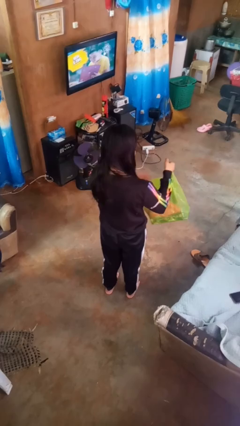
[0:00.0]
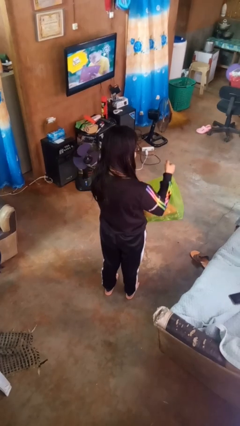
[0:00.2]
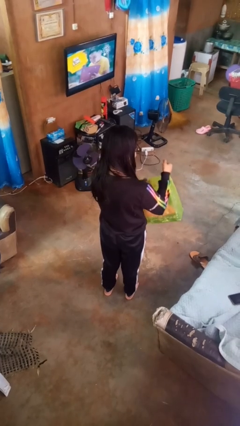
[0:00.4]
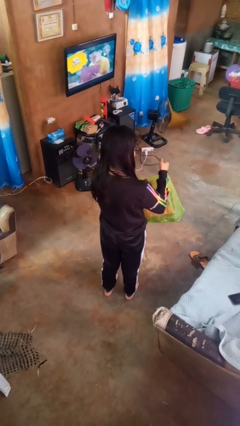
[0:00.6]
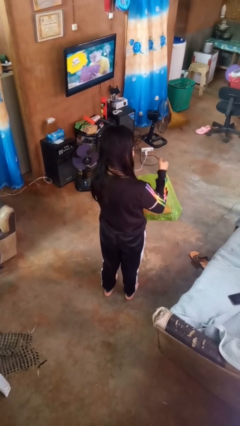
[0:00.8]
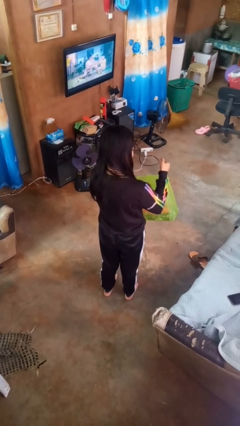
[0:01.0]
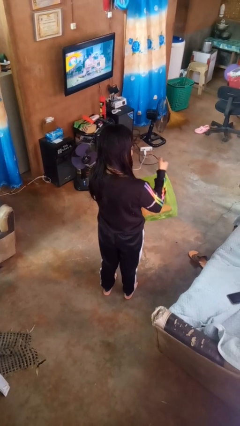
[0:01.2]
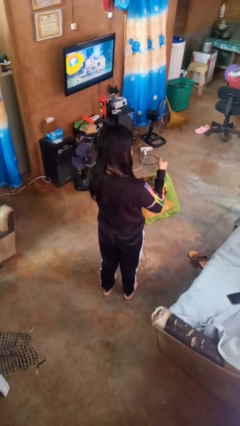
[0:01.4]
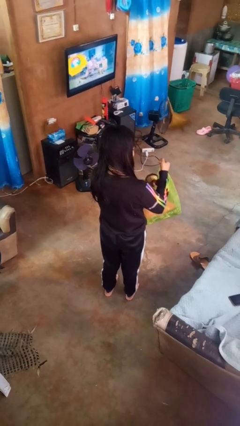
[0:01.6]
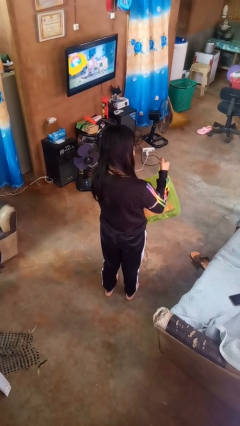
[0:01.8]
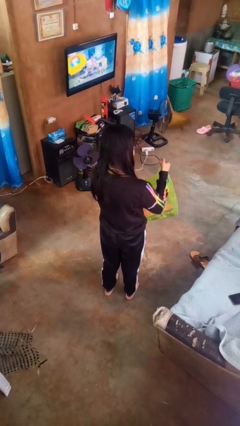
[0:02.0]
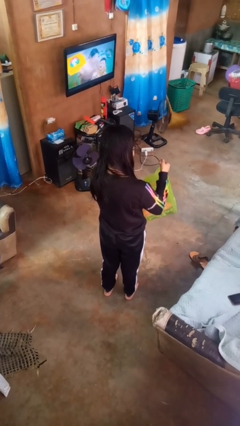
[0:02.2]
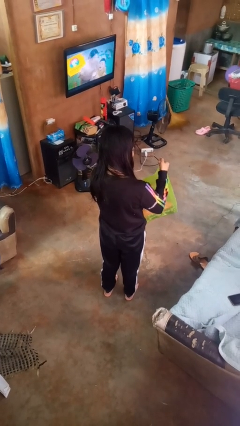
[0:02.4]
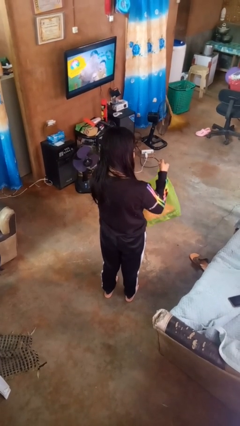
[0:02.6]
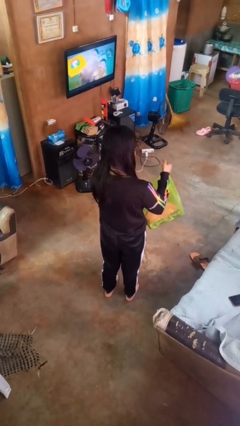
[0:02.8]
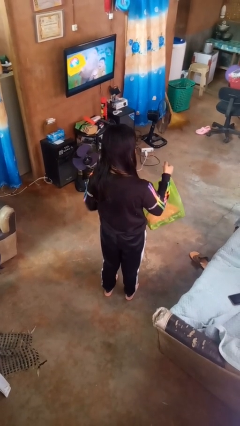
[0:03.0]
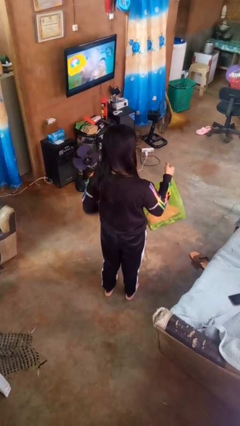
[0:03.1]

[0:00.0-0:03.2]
person searches in bag

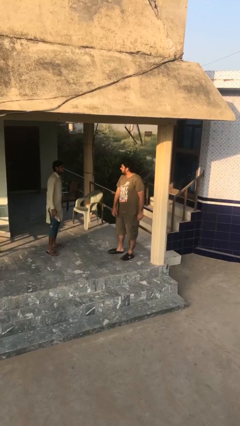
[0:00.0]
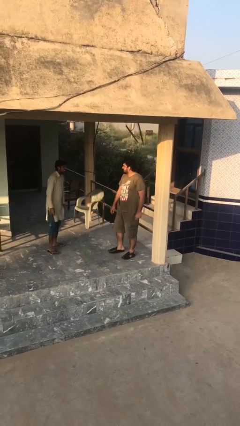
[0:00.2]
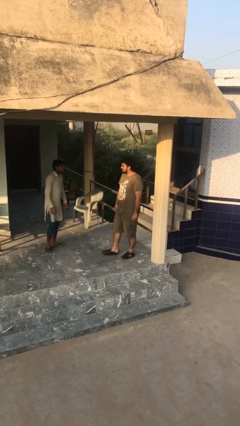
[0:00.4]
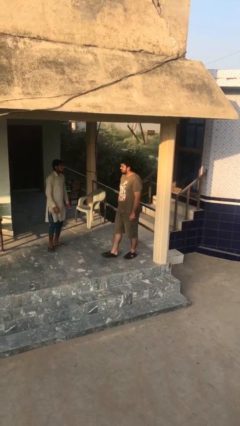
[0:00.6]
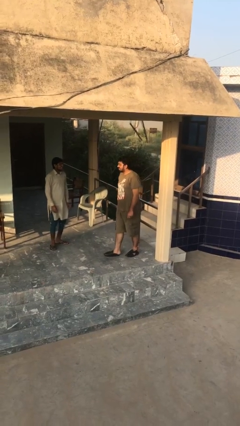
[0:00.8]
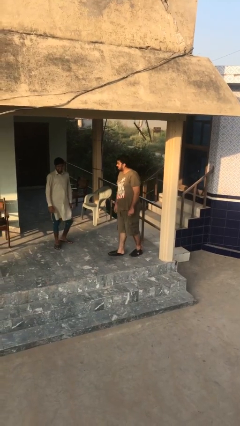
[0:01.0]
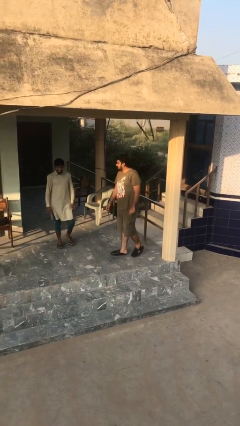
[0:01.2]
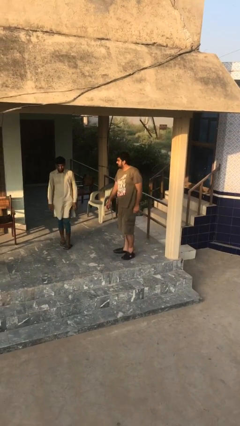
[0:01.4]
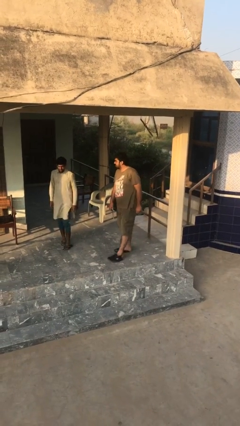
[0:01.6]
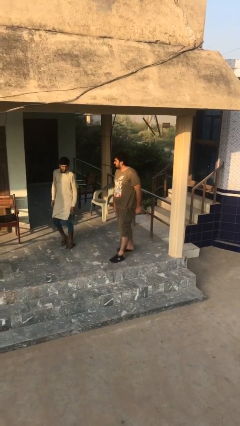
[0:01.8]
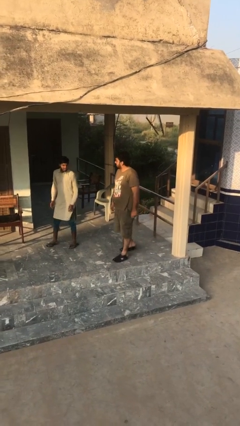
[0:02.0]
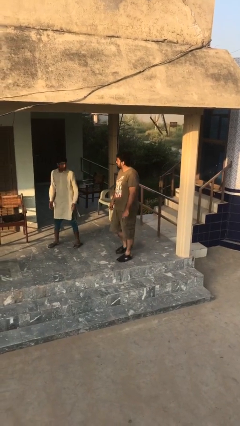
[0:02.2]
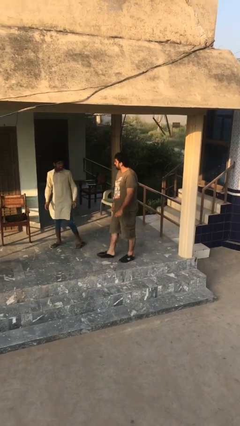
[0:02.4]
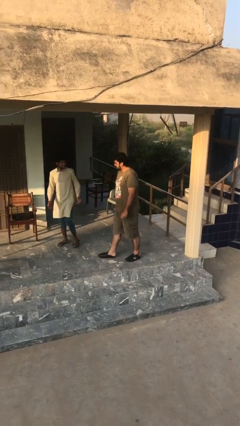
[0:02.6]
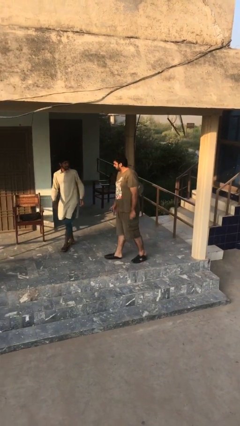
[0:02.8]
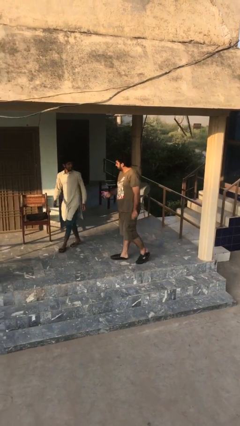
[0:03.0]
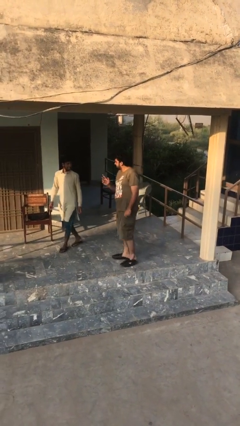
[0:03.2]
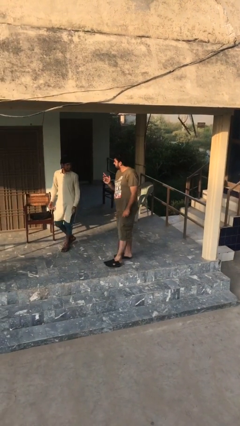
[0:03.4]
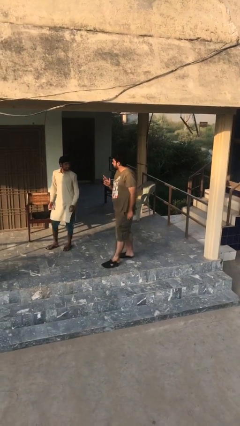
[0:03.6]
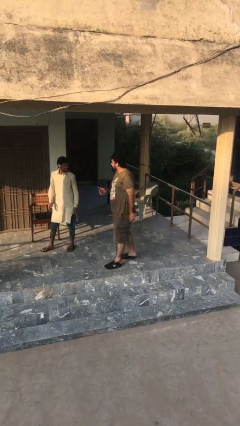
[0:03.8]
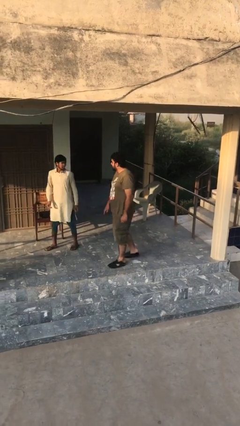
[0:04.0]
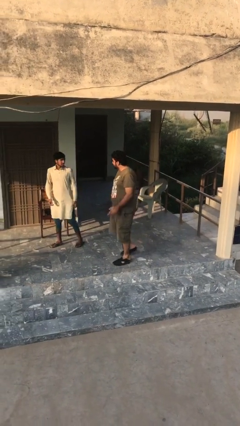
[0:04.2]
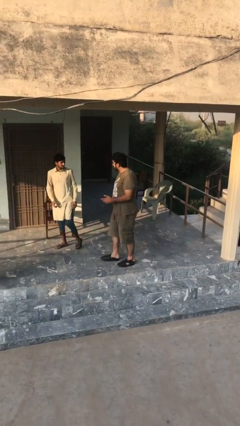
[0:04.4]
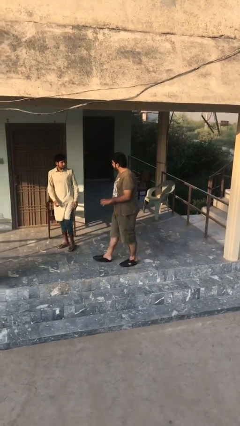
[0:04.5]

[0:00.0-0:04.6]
person talks to person

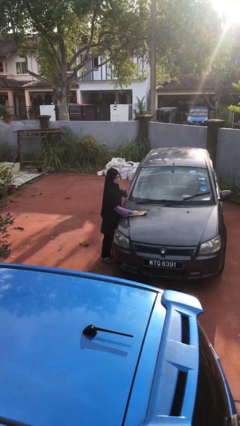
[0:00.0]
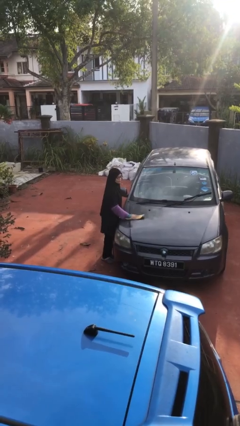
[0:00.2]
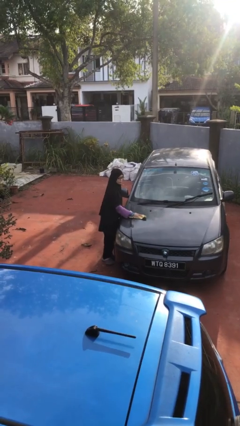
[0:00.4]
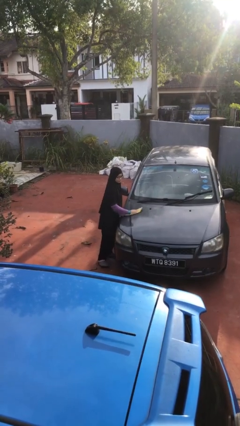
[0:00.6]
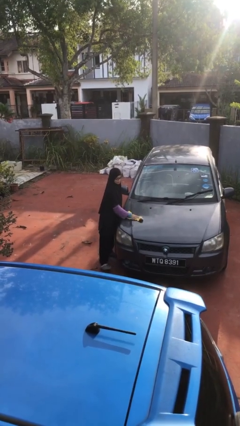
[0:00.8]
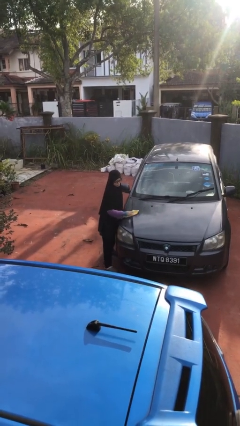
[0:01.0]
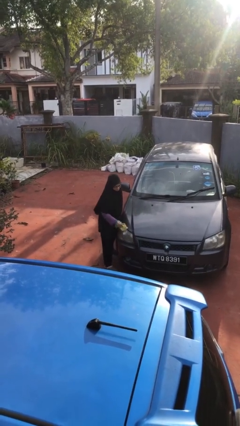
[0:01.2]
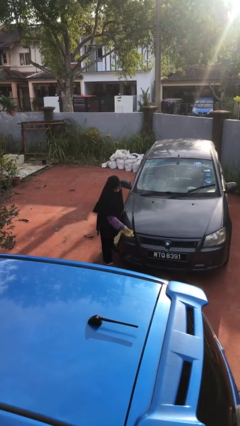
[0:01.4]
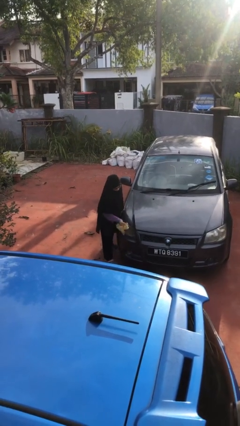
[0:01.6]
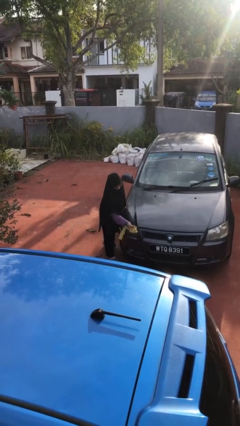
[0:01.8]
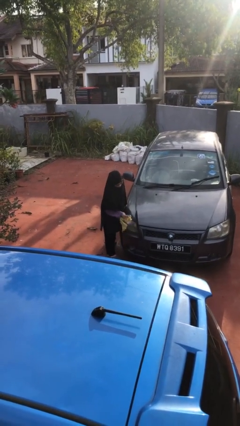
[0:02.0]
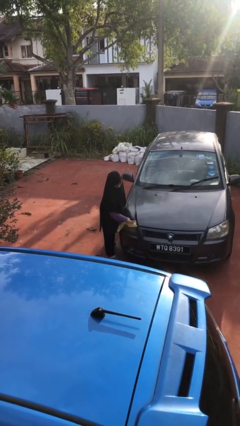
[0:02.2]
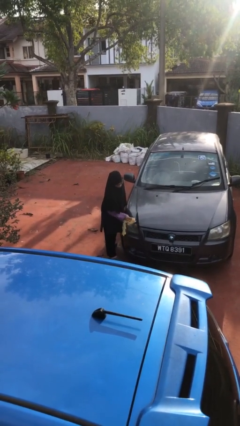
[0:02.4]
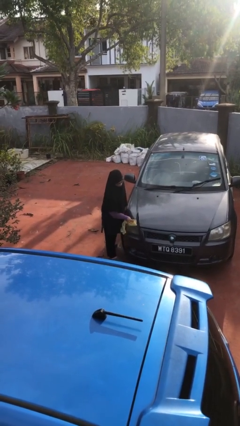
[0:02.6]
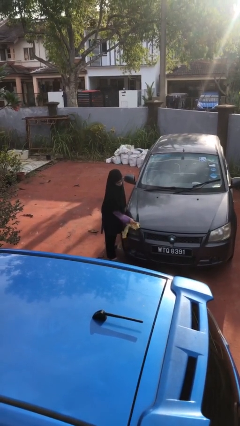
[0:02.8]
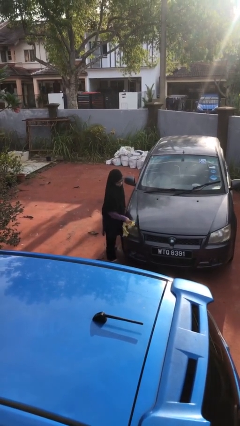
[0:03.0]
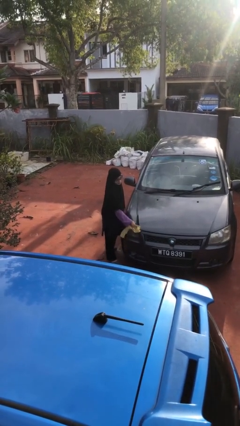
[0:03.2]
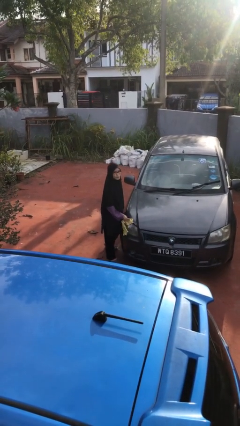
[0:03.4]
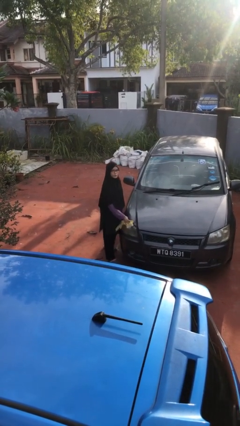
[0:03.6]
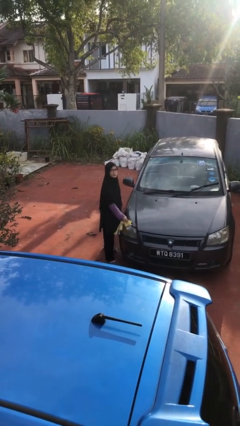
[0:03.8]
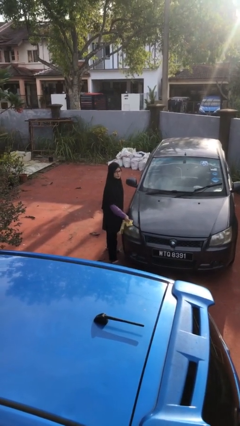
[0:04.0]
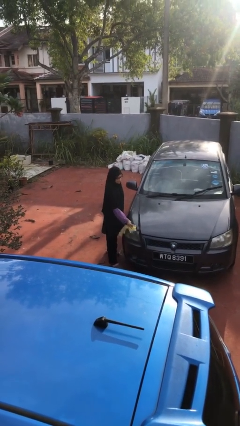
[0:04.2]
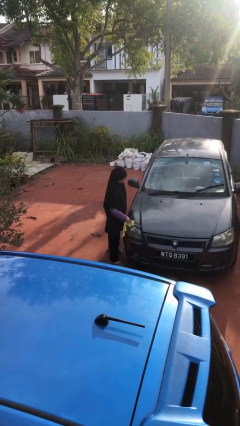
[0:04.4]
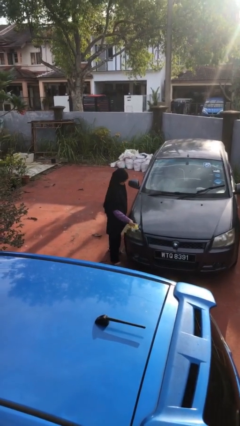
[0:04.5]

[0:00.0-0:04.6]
person polishes car with rag

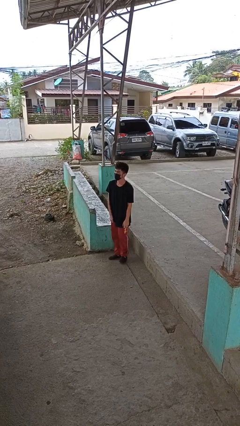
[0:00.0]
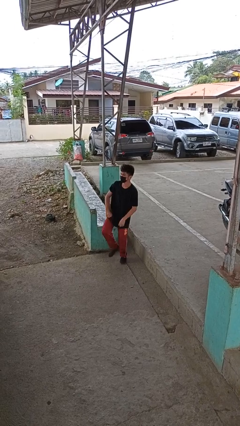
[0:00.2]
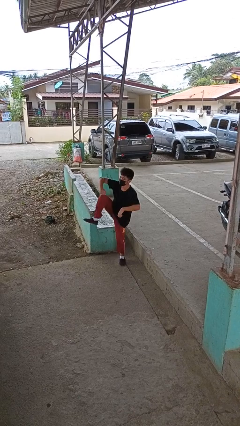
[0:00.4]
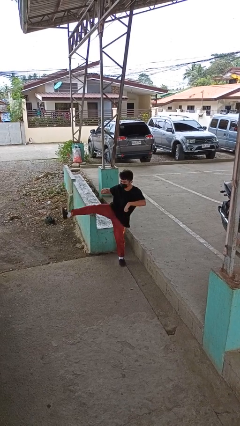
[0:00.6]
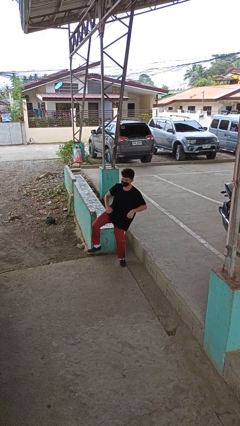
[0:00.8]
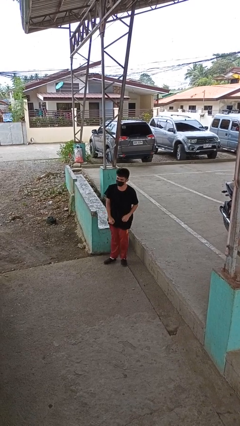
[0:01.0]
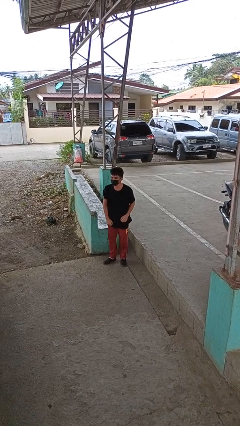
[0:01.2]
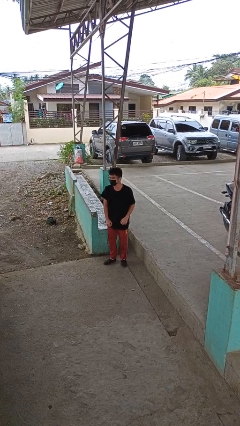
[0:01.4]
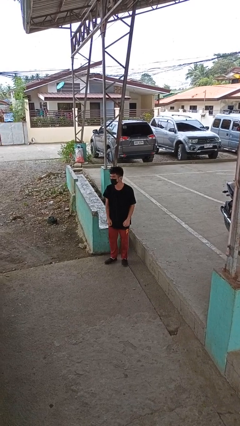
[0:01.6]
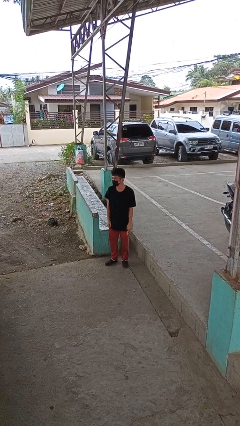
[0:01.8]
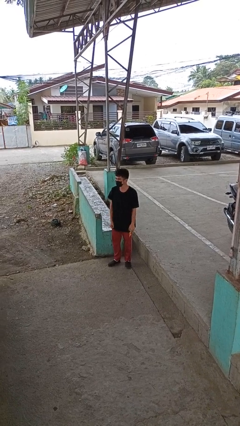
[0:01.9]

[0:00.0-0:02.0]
person karate kicks

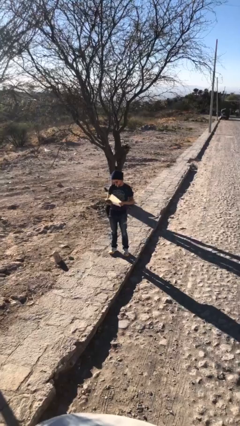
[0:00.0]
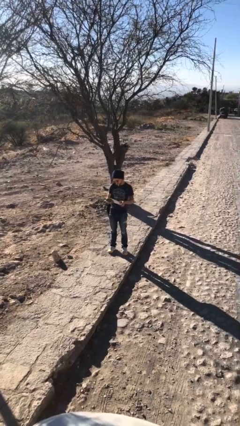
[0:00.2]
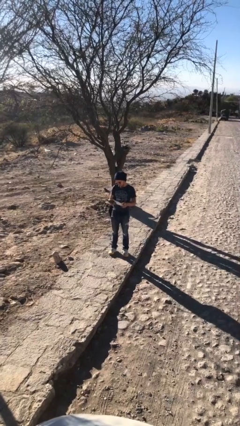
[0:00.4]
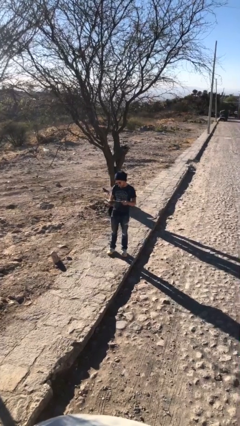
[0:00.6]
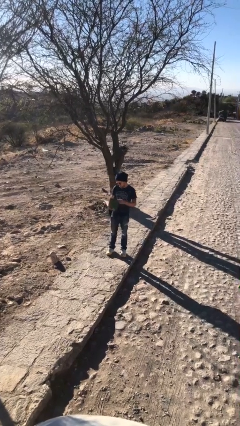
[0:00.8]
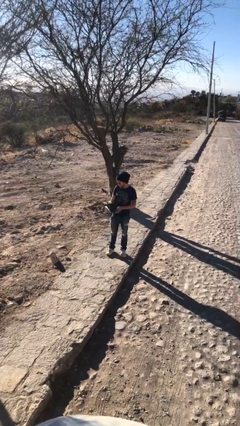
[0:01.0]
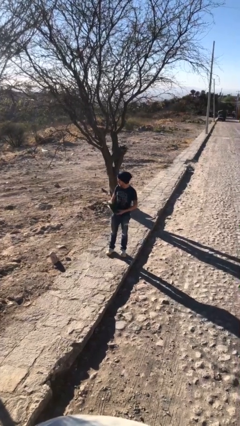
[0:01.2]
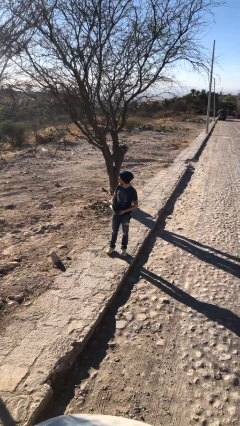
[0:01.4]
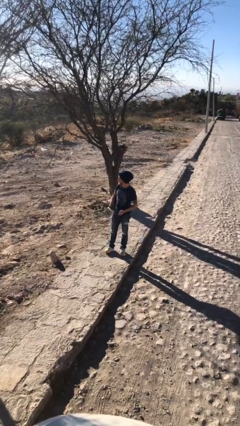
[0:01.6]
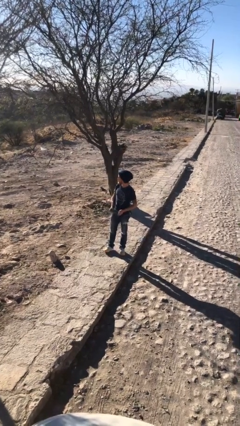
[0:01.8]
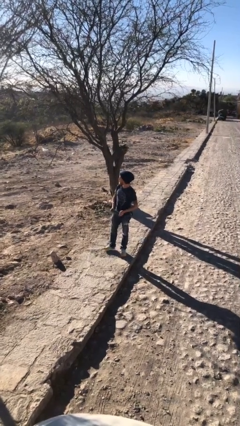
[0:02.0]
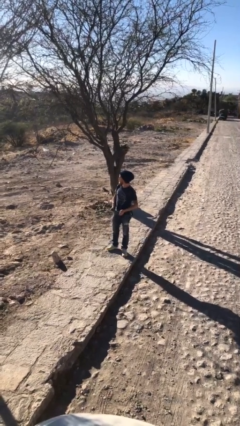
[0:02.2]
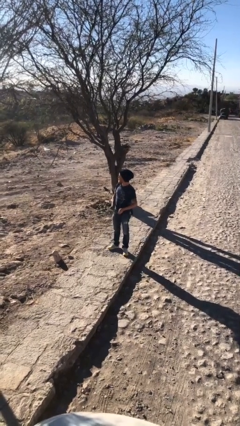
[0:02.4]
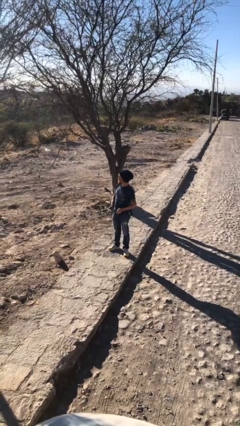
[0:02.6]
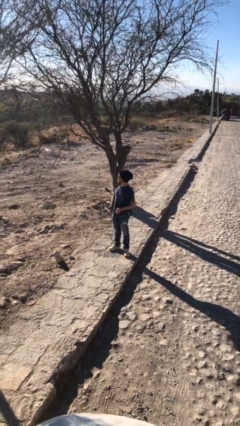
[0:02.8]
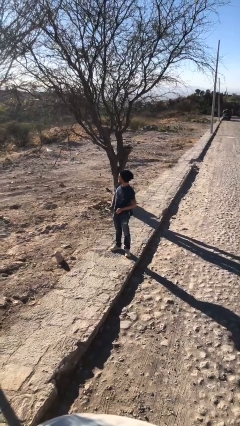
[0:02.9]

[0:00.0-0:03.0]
person reads document

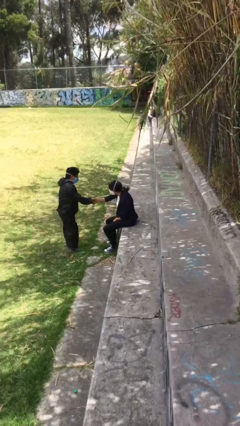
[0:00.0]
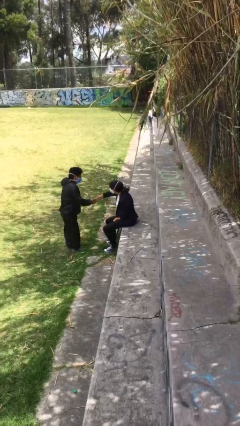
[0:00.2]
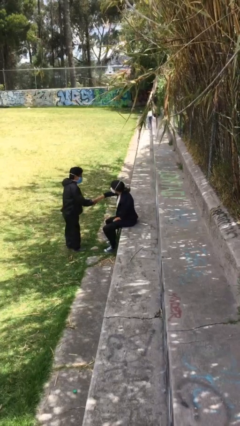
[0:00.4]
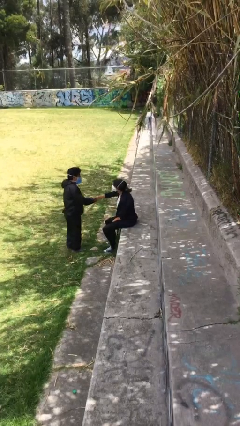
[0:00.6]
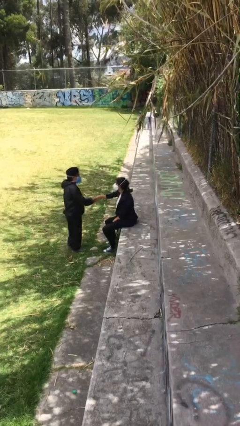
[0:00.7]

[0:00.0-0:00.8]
person shakes hand
